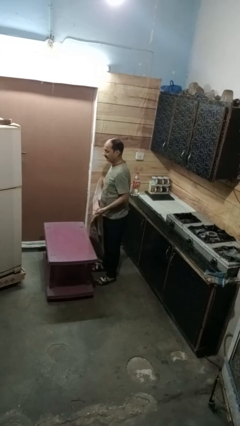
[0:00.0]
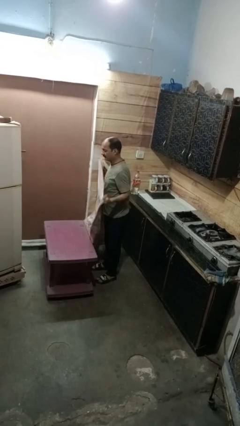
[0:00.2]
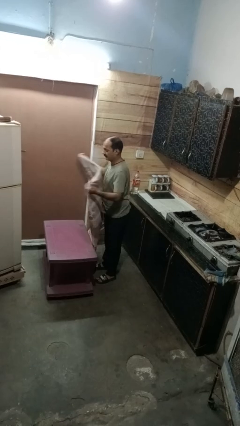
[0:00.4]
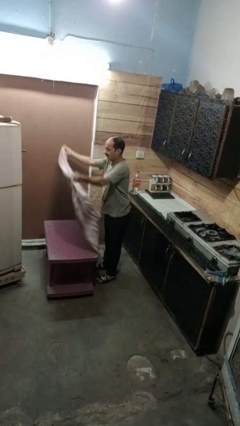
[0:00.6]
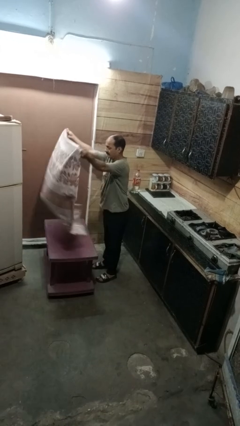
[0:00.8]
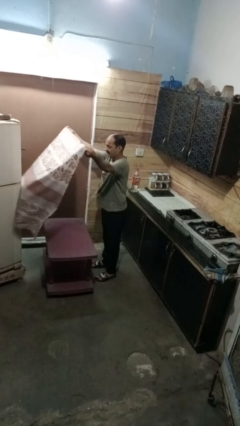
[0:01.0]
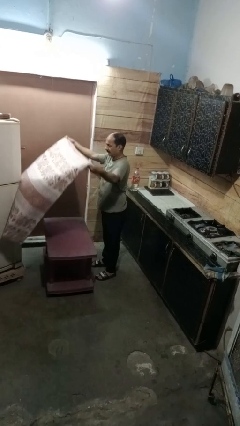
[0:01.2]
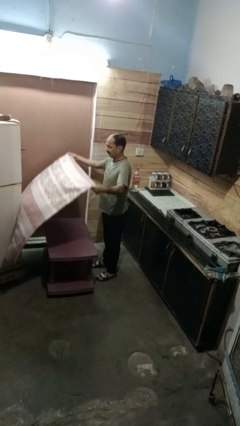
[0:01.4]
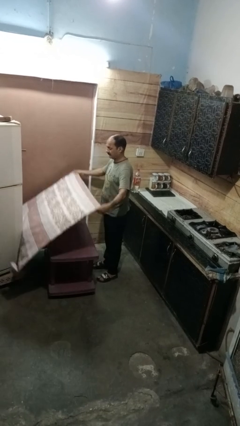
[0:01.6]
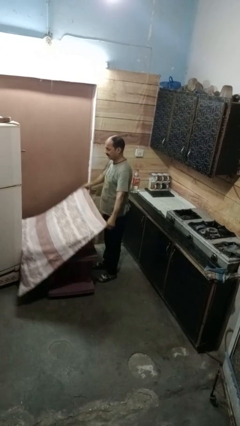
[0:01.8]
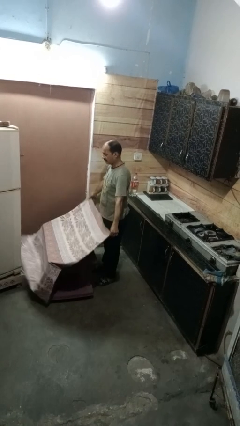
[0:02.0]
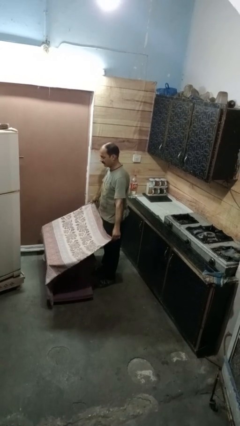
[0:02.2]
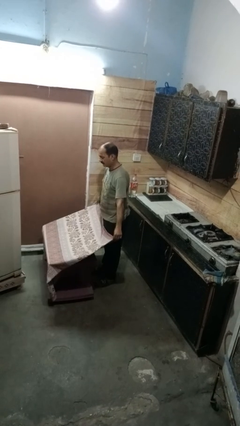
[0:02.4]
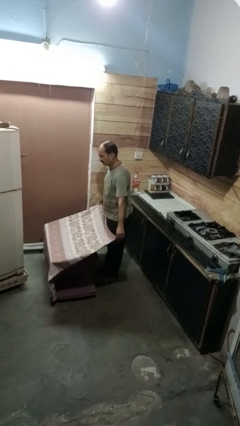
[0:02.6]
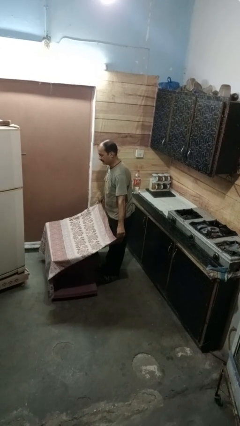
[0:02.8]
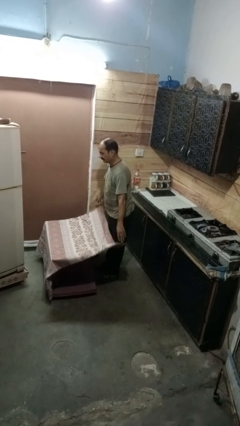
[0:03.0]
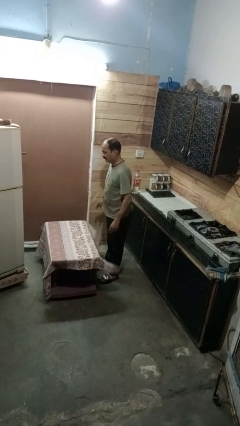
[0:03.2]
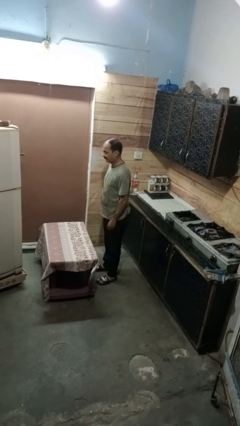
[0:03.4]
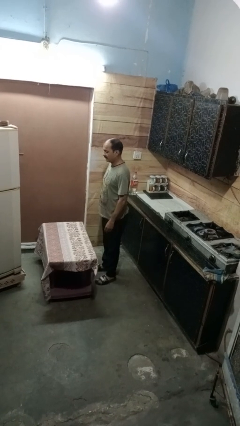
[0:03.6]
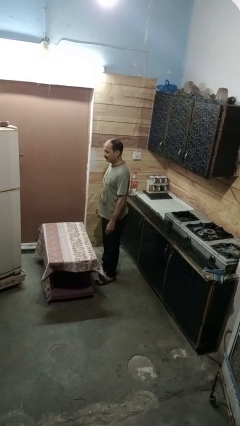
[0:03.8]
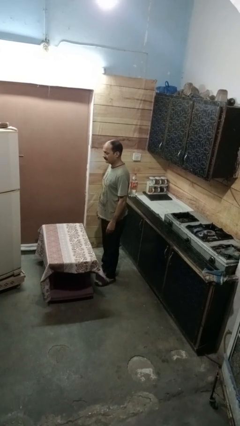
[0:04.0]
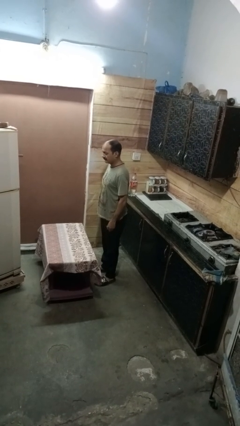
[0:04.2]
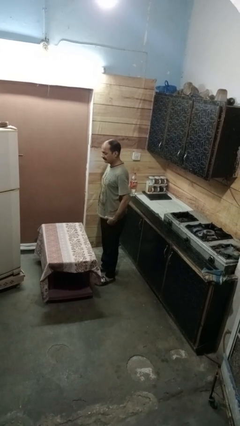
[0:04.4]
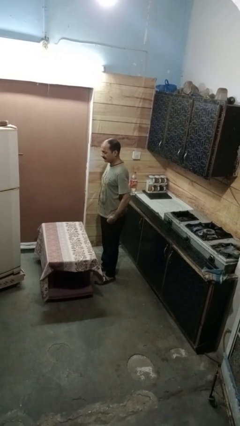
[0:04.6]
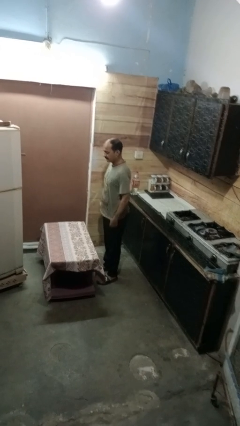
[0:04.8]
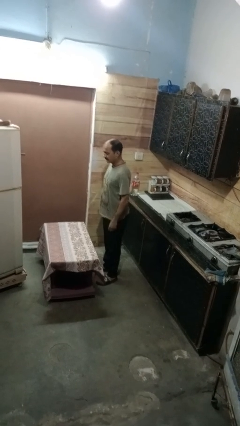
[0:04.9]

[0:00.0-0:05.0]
person spreads tablecloth

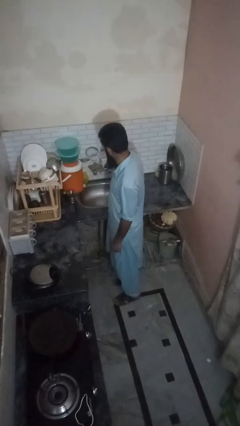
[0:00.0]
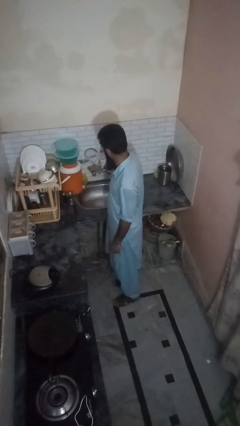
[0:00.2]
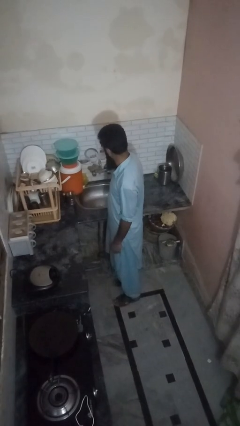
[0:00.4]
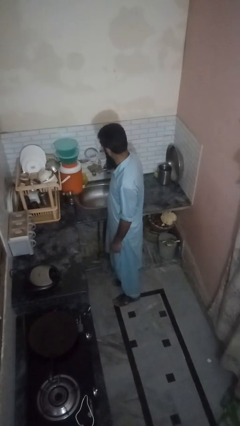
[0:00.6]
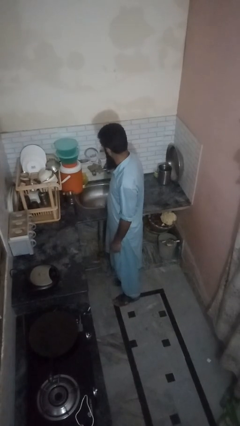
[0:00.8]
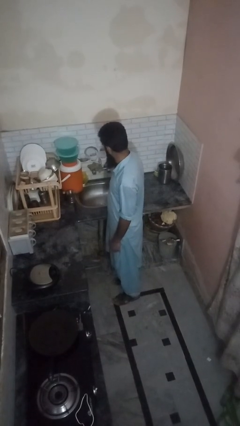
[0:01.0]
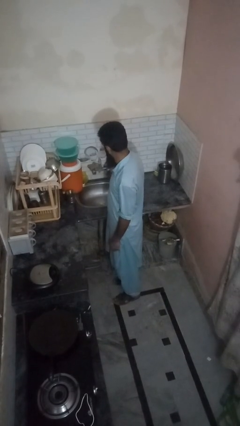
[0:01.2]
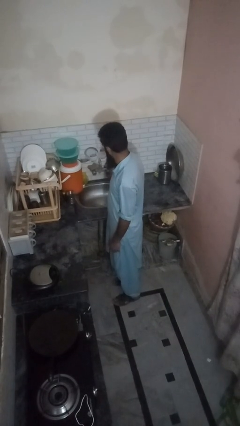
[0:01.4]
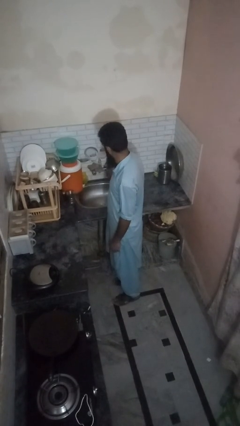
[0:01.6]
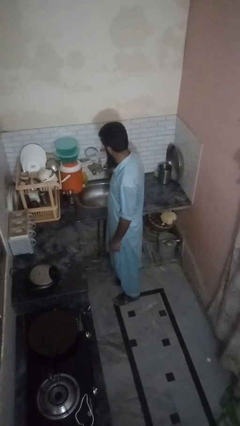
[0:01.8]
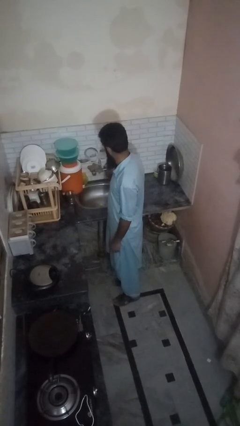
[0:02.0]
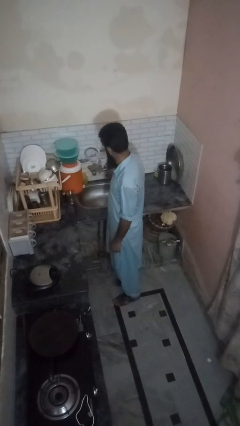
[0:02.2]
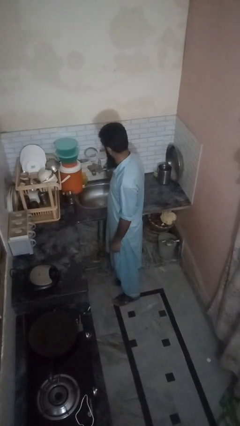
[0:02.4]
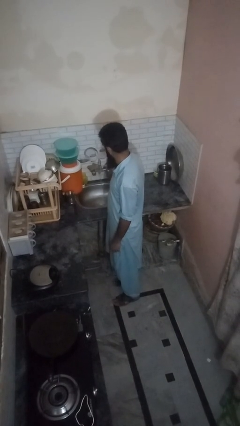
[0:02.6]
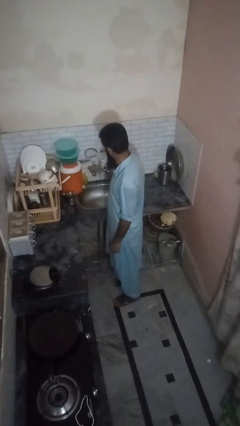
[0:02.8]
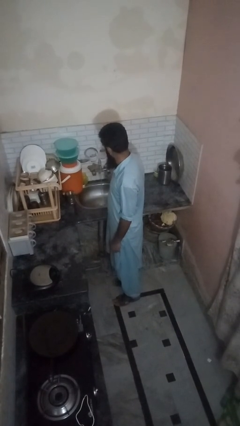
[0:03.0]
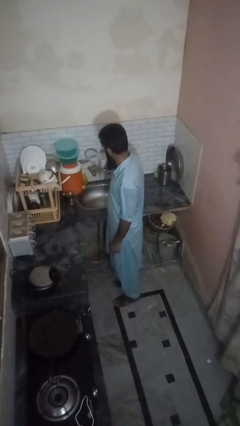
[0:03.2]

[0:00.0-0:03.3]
person turns on faucet

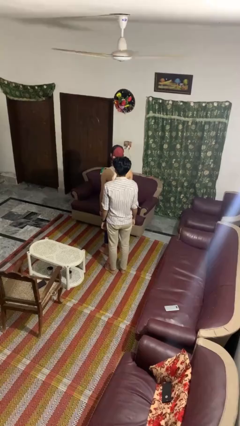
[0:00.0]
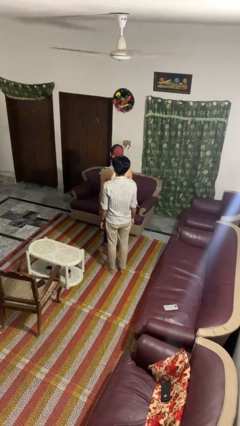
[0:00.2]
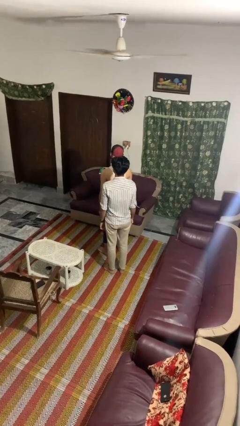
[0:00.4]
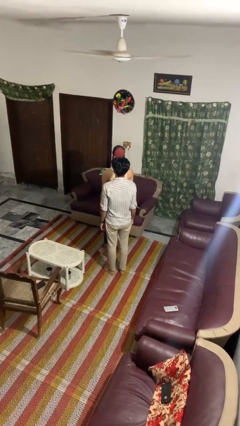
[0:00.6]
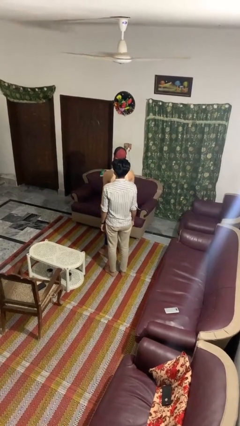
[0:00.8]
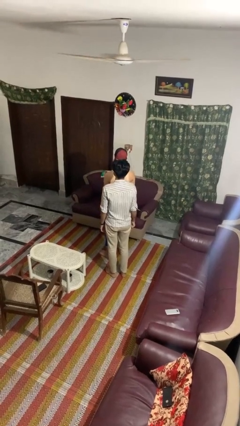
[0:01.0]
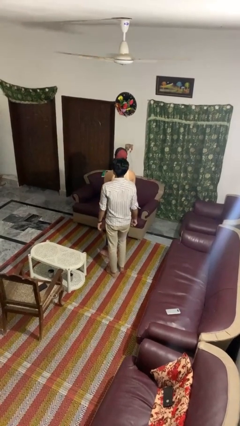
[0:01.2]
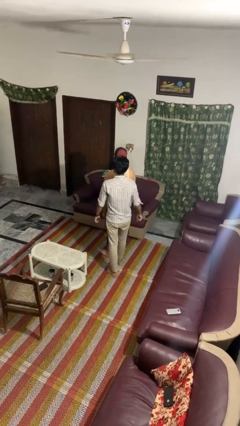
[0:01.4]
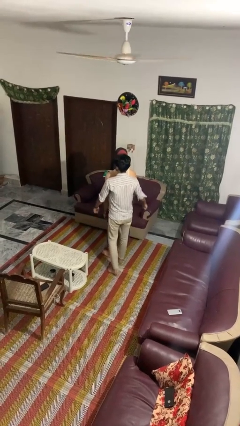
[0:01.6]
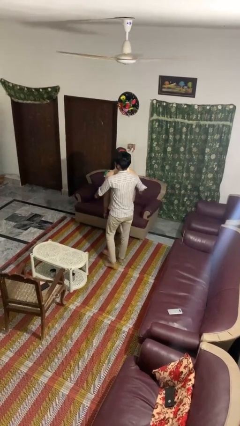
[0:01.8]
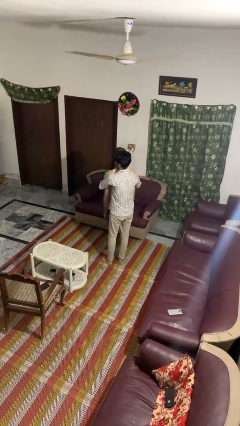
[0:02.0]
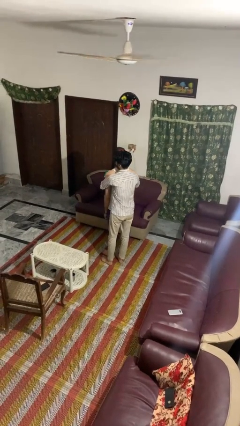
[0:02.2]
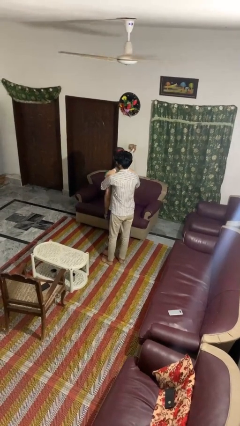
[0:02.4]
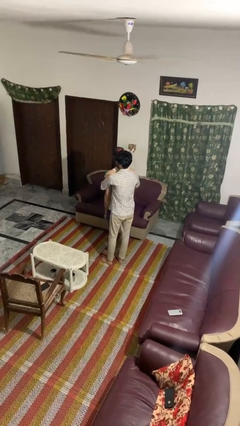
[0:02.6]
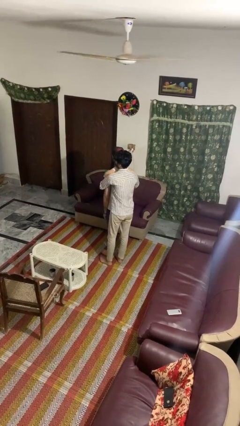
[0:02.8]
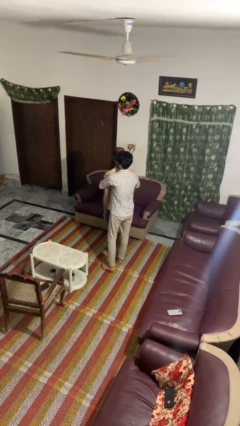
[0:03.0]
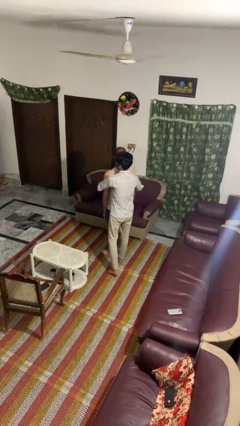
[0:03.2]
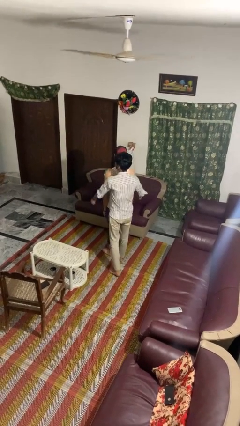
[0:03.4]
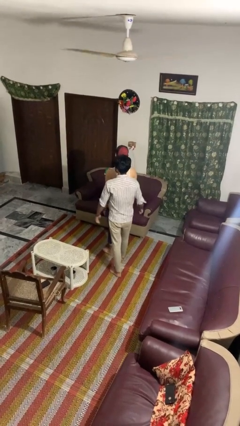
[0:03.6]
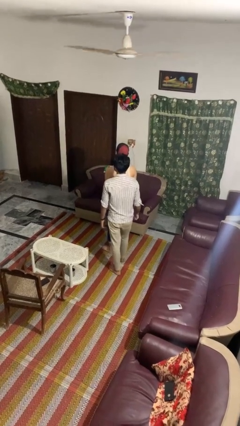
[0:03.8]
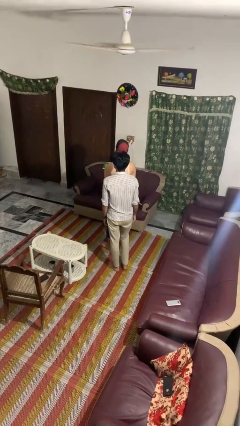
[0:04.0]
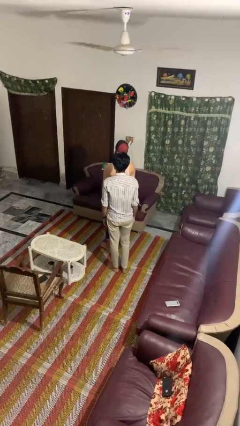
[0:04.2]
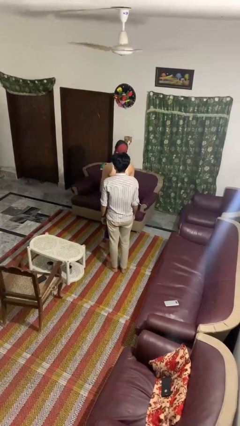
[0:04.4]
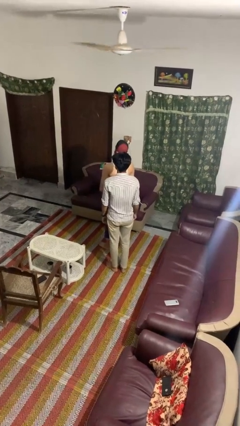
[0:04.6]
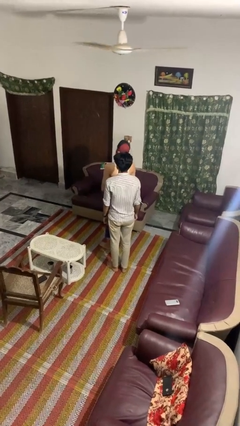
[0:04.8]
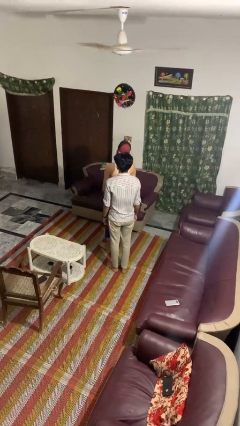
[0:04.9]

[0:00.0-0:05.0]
person hugs person from behind

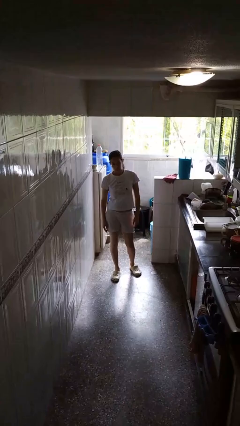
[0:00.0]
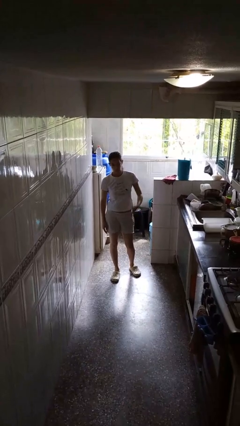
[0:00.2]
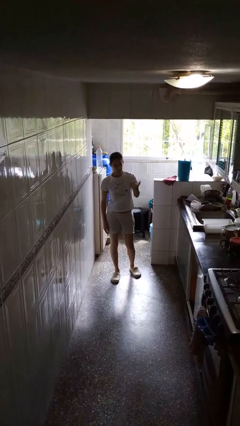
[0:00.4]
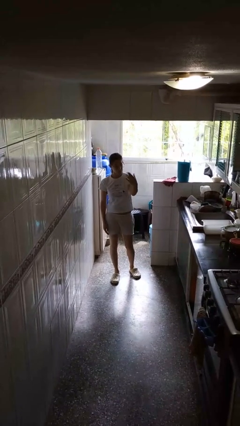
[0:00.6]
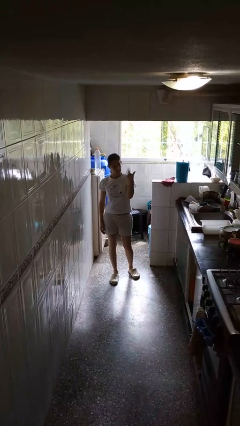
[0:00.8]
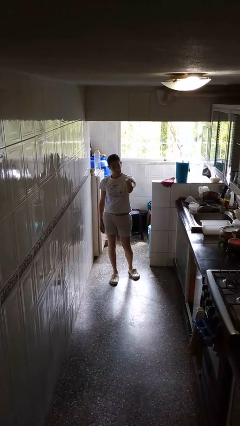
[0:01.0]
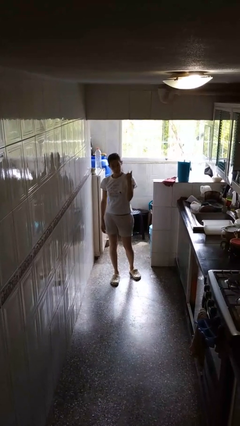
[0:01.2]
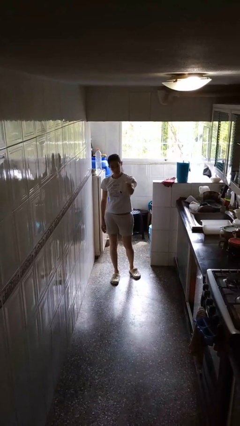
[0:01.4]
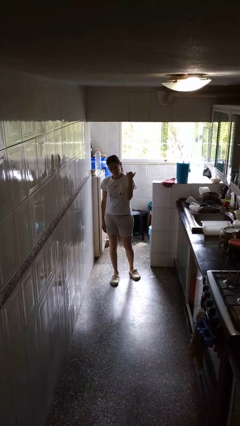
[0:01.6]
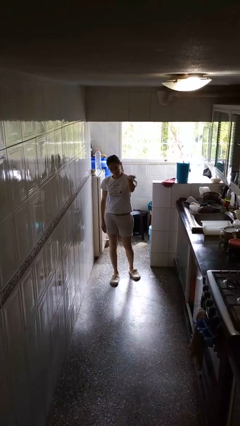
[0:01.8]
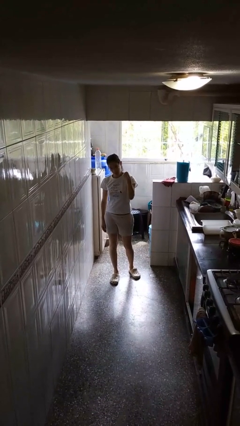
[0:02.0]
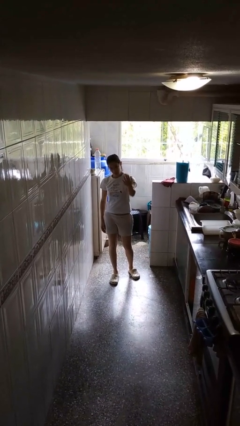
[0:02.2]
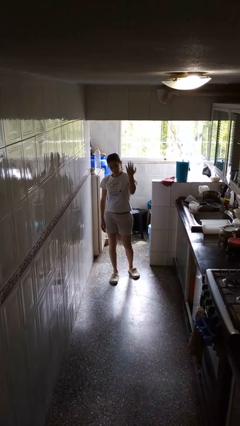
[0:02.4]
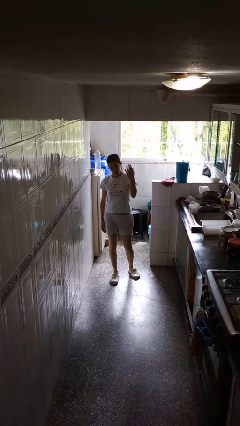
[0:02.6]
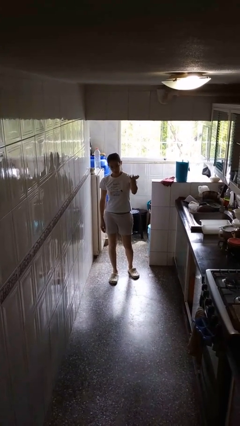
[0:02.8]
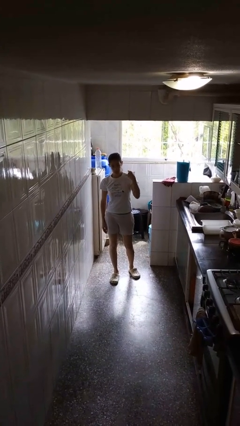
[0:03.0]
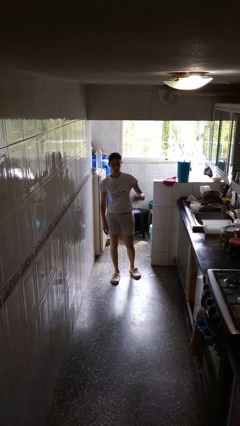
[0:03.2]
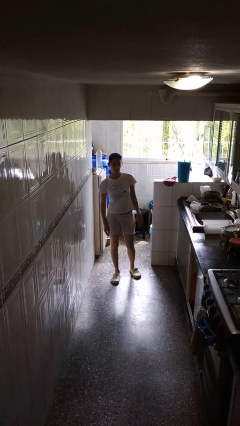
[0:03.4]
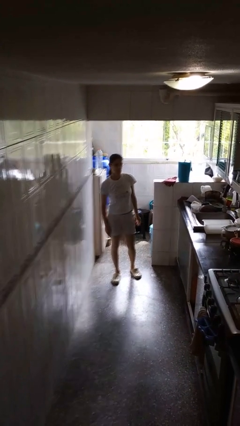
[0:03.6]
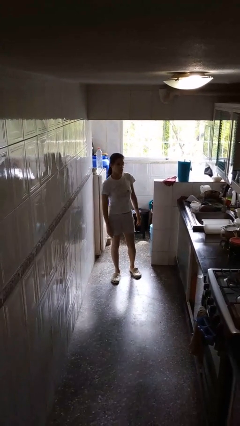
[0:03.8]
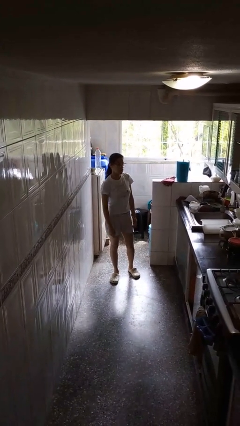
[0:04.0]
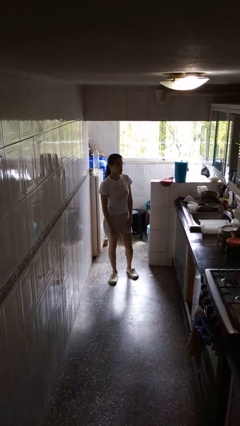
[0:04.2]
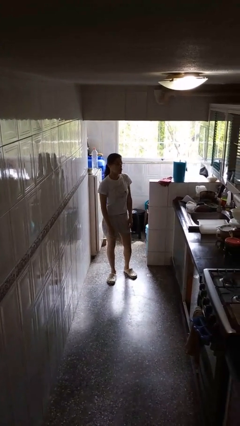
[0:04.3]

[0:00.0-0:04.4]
person gestures come here
